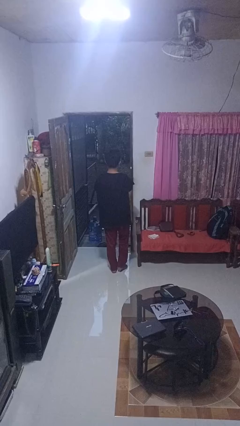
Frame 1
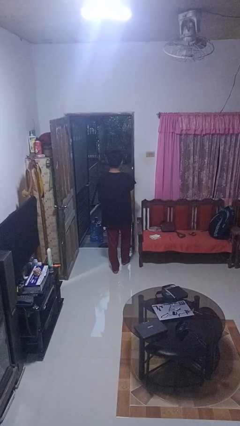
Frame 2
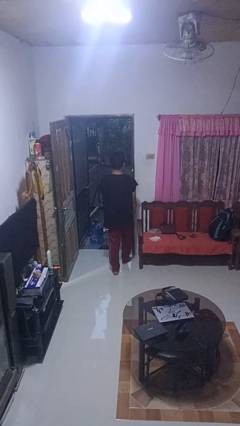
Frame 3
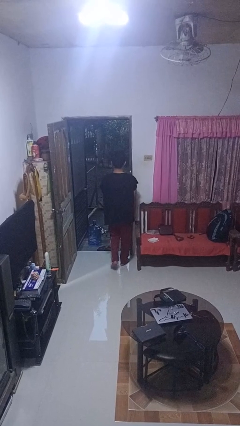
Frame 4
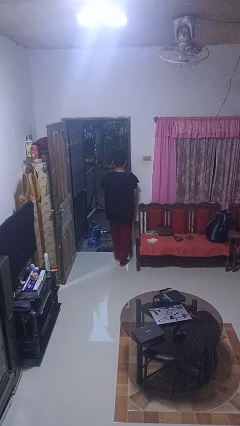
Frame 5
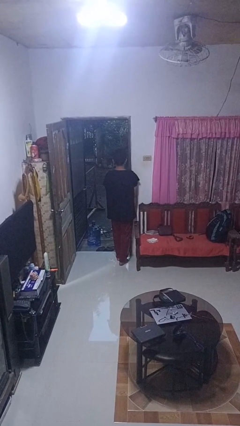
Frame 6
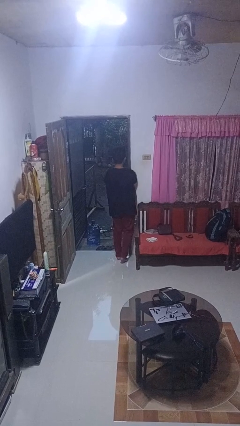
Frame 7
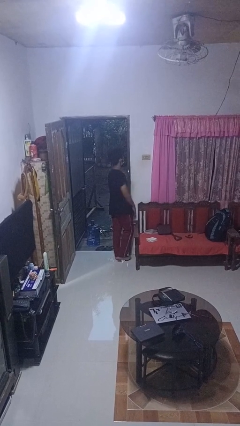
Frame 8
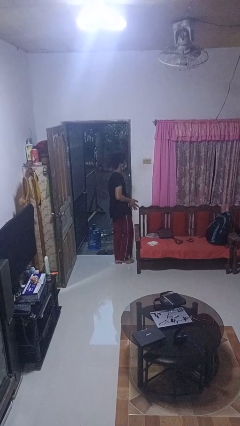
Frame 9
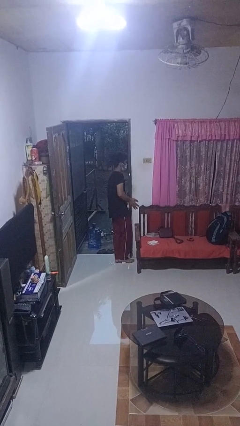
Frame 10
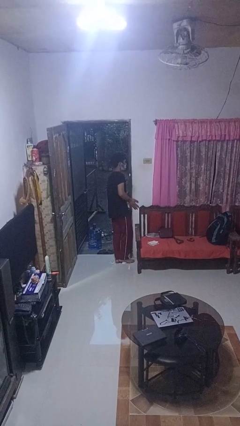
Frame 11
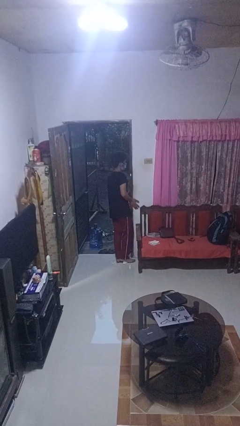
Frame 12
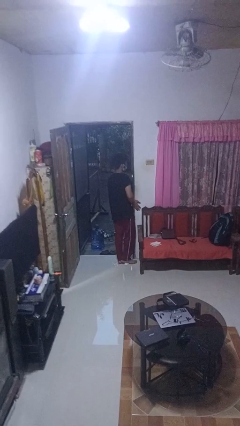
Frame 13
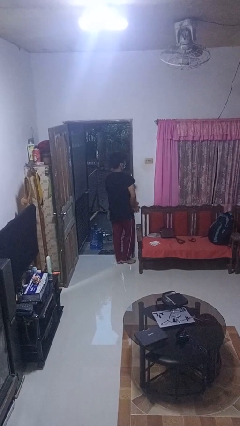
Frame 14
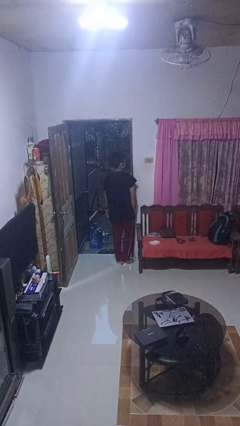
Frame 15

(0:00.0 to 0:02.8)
person bumps into wall

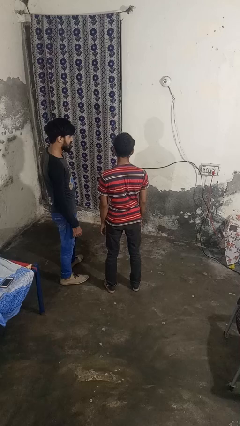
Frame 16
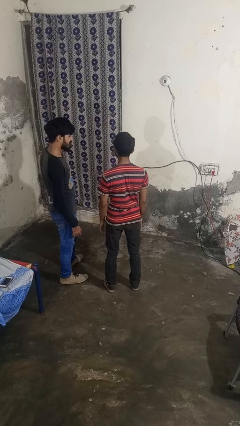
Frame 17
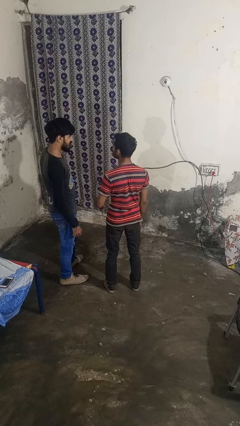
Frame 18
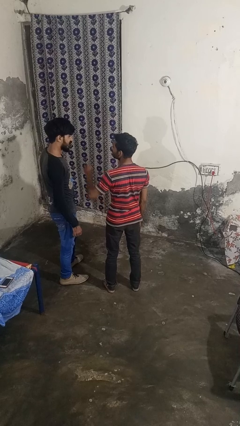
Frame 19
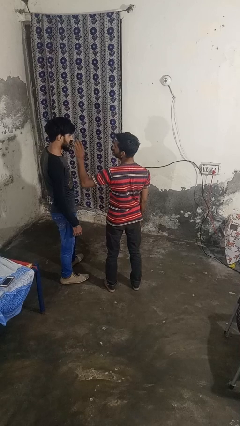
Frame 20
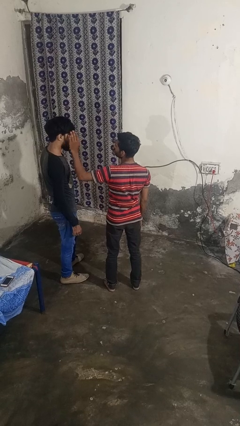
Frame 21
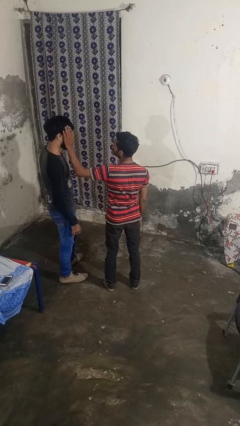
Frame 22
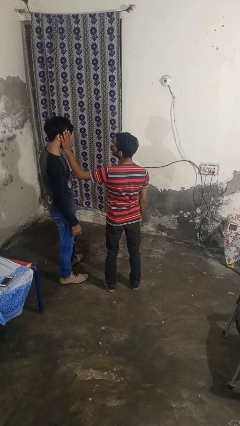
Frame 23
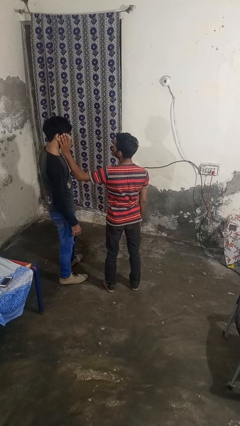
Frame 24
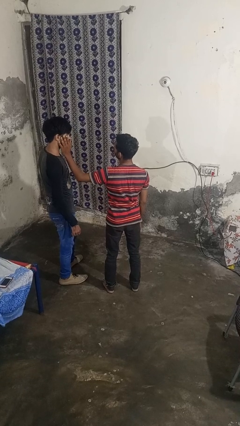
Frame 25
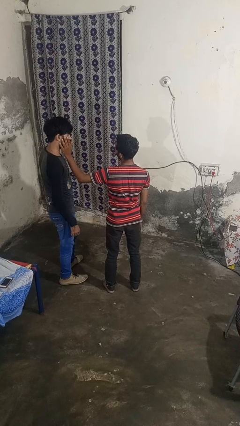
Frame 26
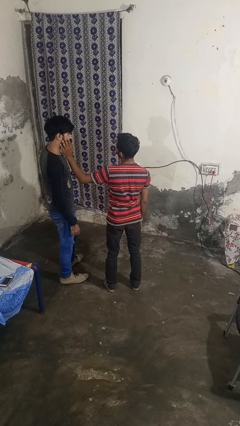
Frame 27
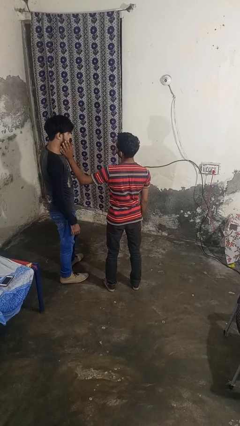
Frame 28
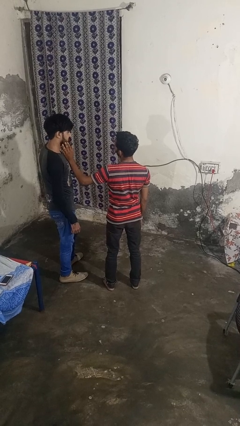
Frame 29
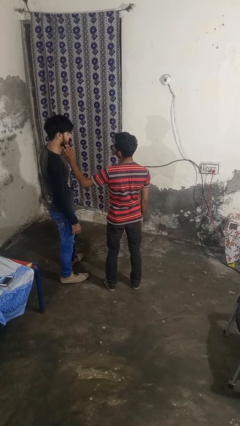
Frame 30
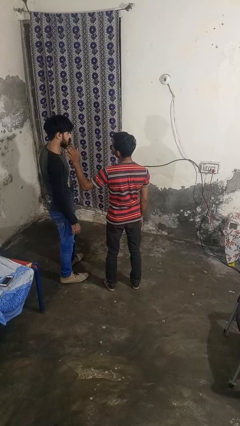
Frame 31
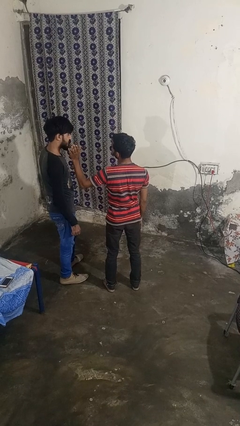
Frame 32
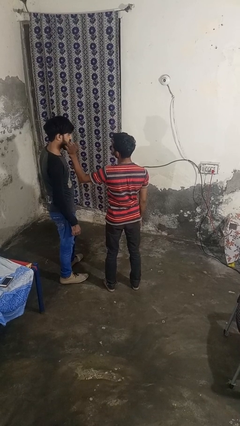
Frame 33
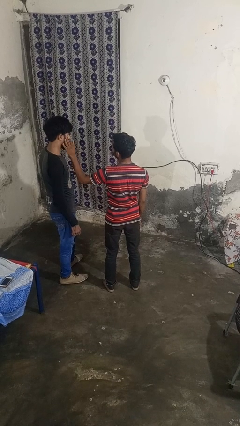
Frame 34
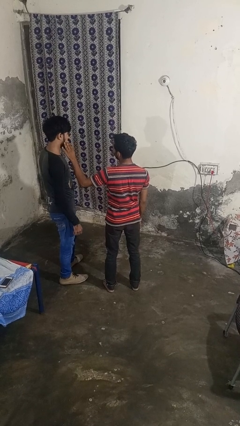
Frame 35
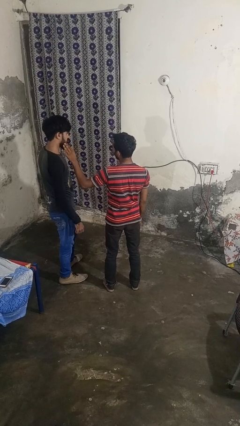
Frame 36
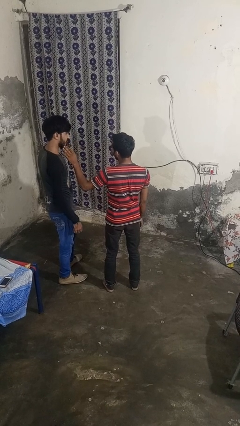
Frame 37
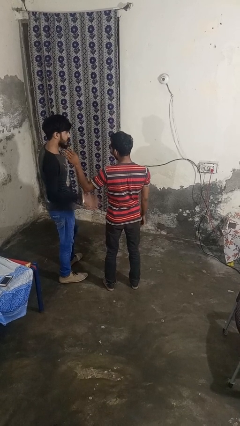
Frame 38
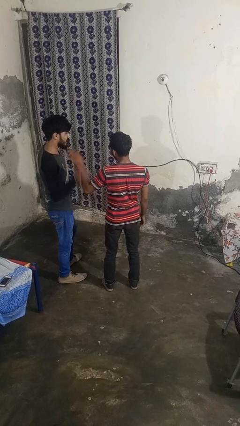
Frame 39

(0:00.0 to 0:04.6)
person touches face of person

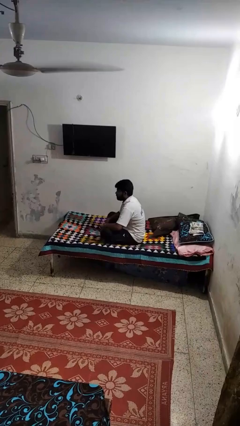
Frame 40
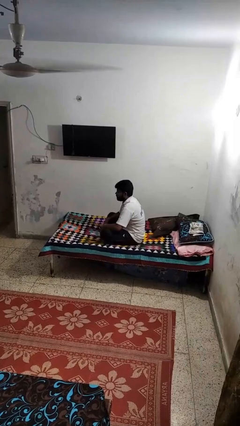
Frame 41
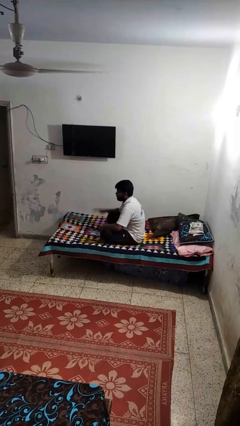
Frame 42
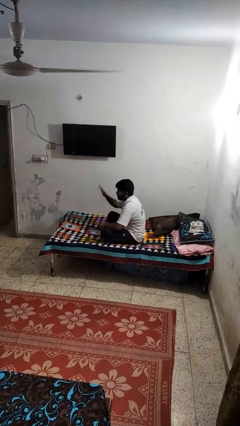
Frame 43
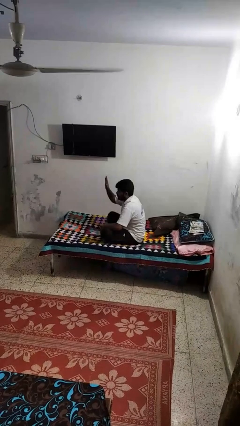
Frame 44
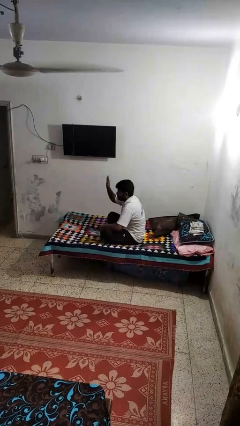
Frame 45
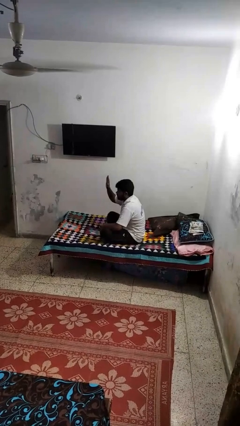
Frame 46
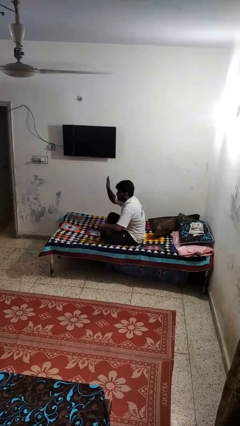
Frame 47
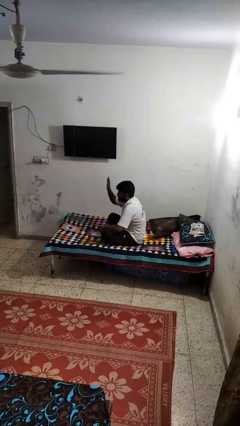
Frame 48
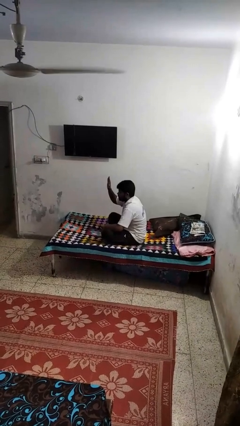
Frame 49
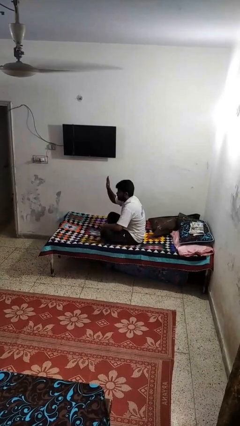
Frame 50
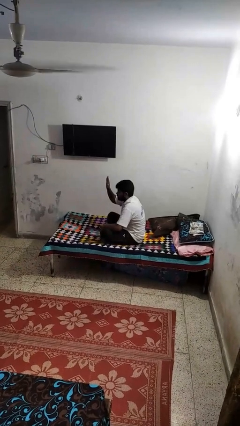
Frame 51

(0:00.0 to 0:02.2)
person gestures raise hand

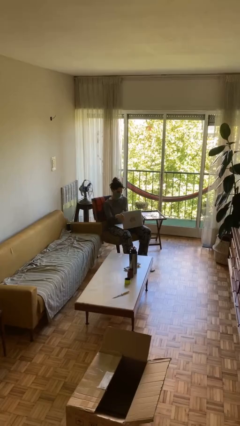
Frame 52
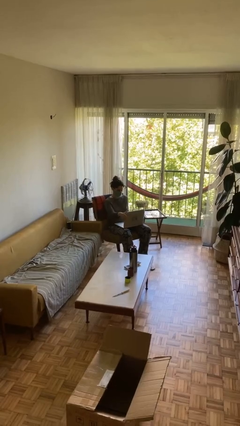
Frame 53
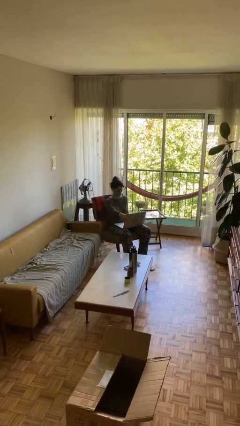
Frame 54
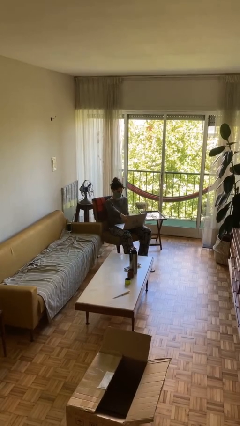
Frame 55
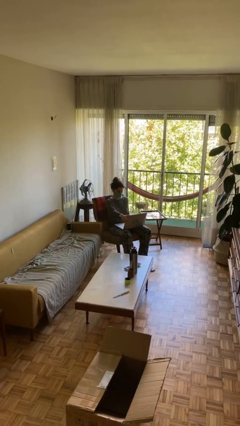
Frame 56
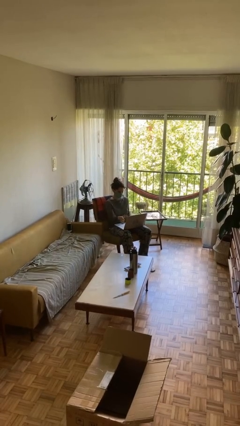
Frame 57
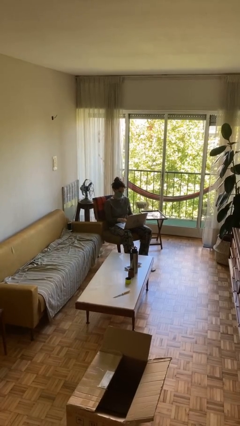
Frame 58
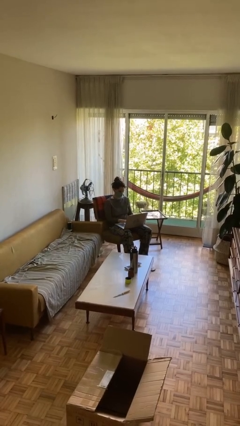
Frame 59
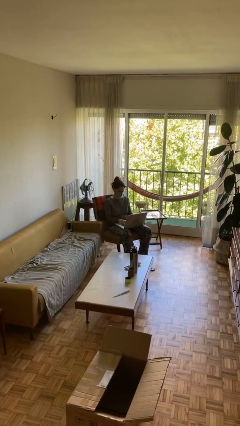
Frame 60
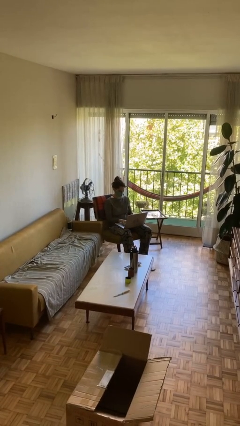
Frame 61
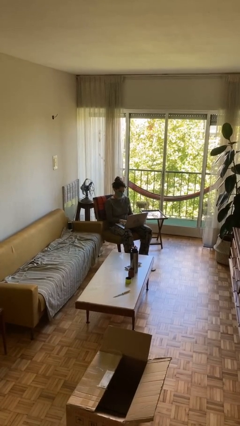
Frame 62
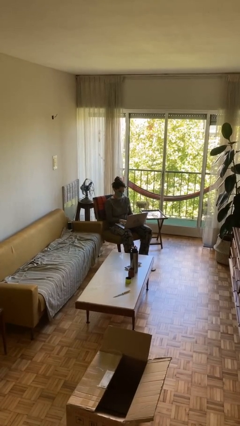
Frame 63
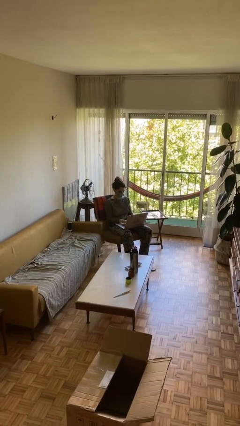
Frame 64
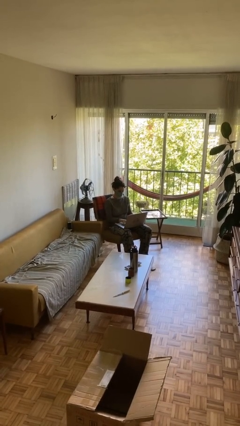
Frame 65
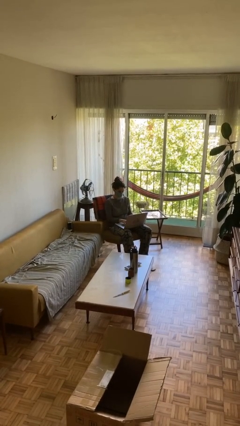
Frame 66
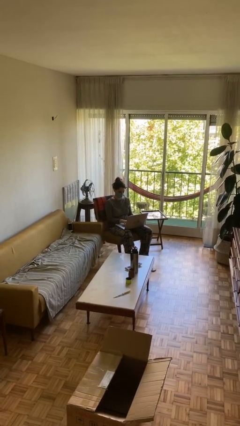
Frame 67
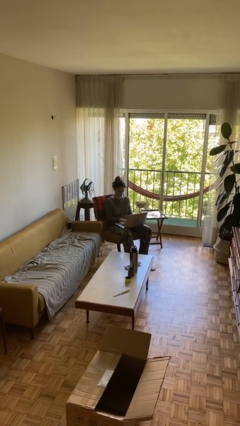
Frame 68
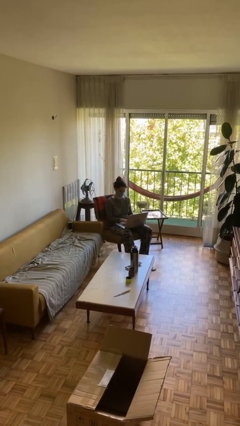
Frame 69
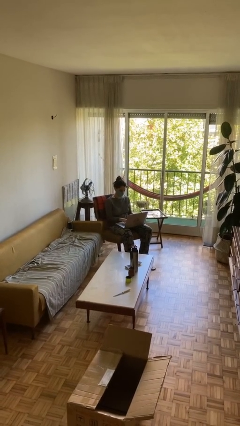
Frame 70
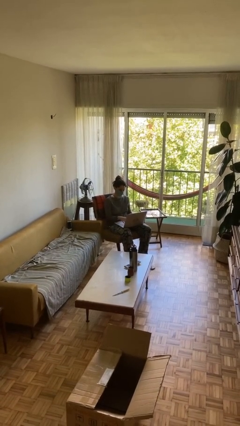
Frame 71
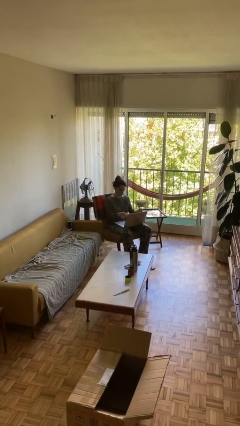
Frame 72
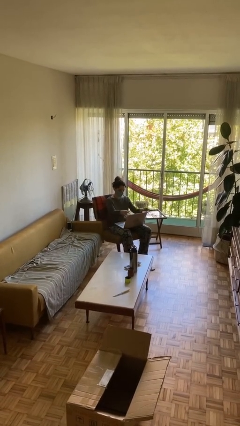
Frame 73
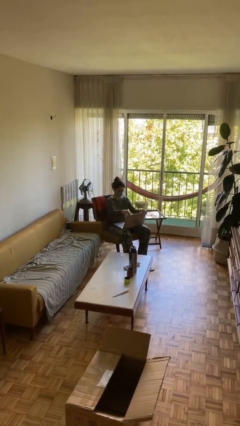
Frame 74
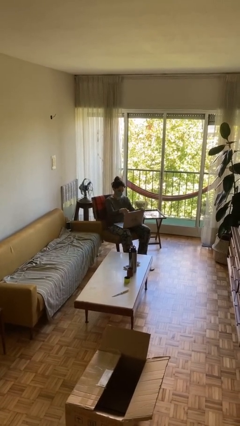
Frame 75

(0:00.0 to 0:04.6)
person interacts with laptop

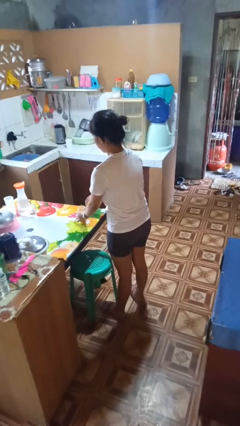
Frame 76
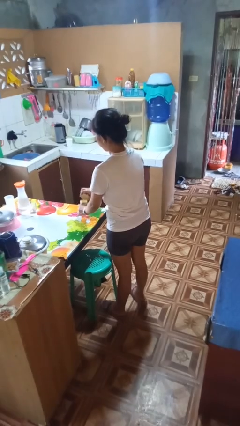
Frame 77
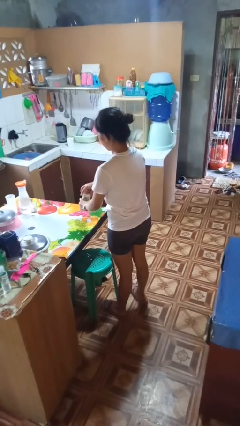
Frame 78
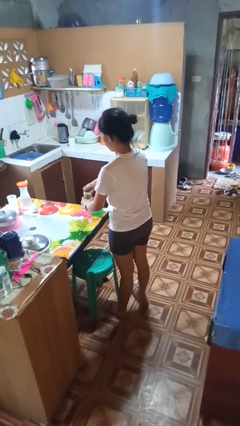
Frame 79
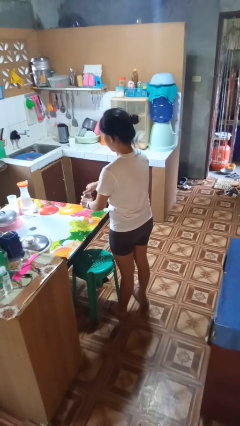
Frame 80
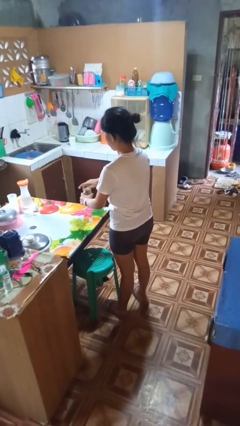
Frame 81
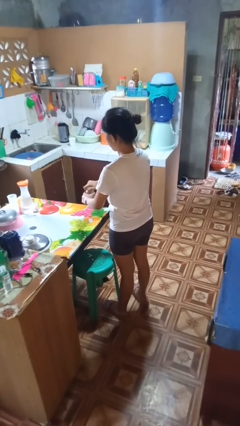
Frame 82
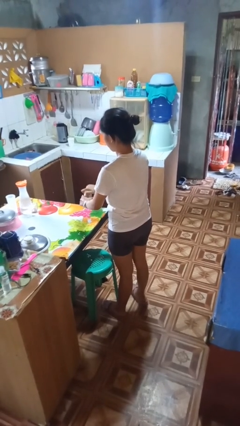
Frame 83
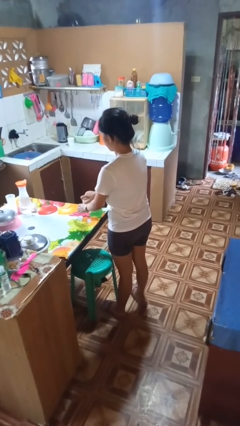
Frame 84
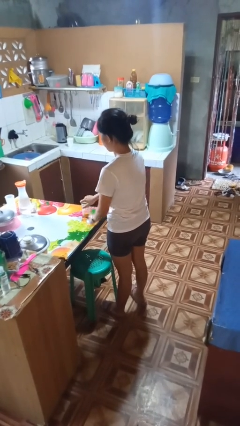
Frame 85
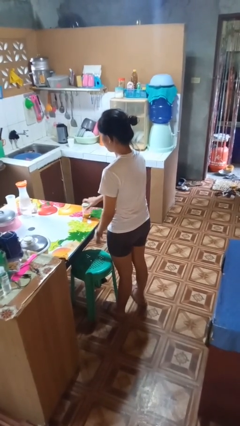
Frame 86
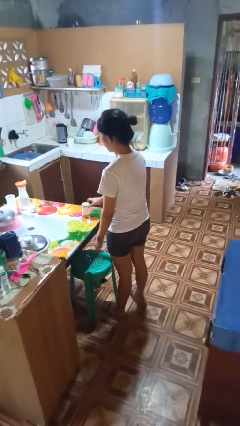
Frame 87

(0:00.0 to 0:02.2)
person closes jar

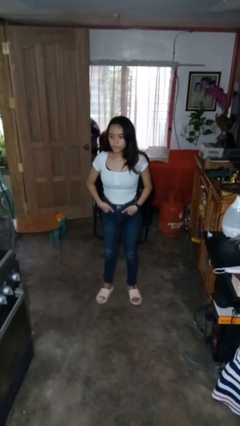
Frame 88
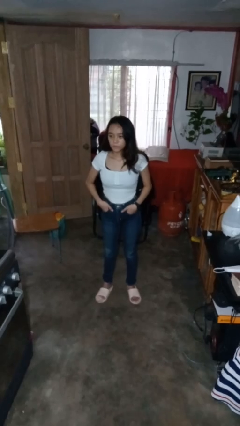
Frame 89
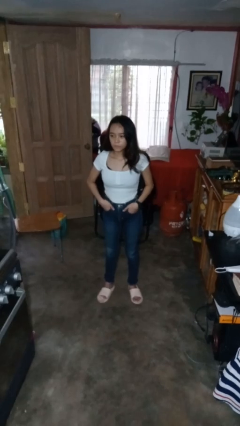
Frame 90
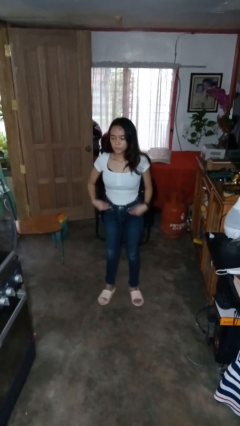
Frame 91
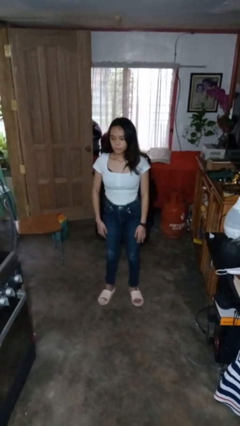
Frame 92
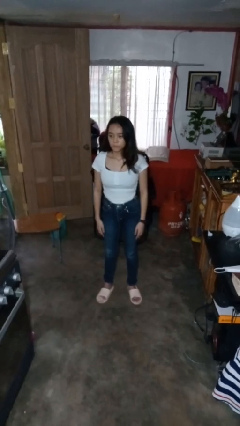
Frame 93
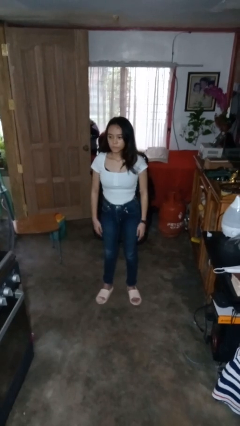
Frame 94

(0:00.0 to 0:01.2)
person puts hands in back pockets
